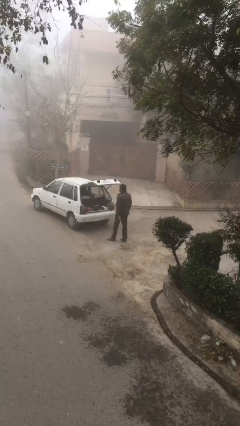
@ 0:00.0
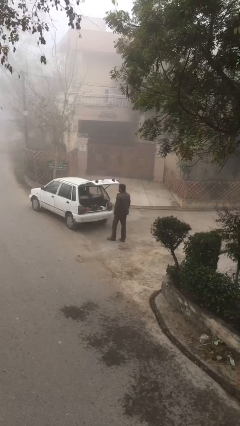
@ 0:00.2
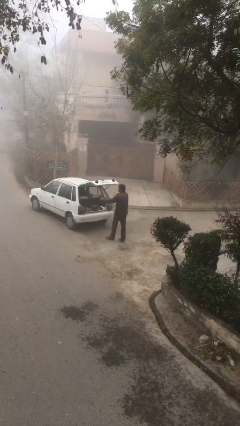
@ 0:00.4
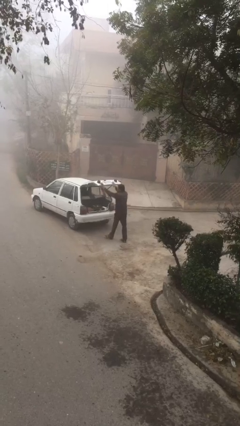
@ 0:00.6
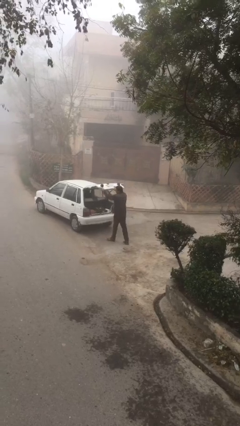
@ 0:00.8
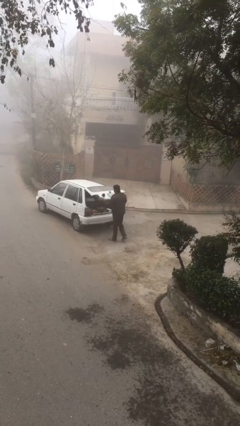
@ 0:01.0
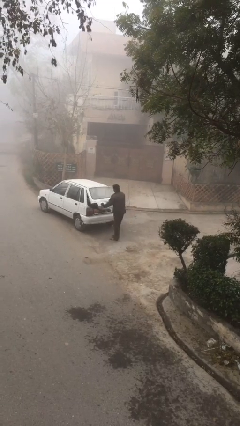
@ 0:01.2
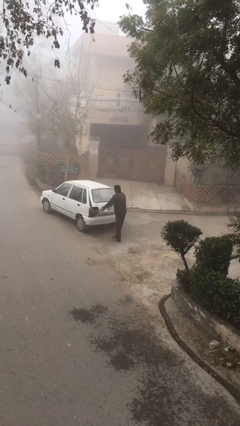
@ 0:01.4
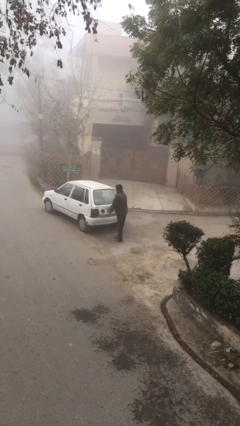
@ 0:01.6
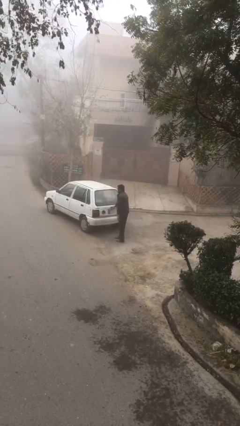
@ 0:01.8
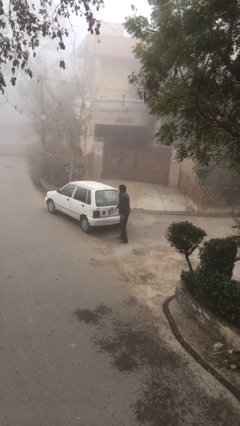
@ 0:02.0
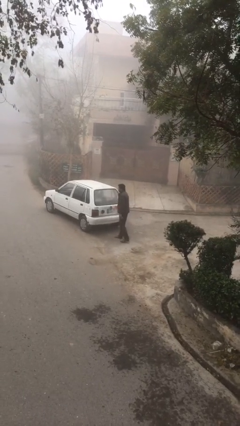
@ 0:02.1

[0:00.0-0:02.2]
person closes car trunk

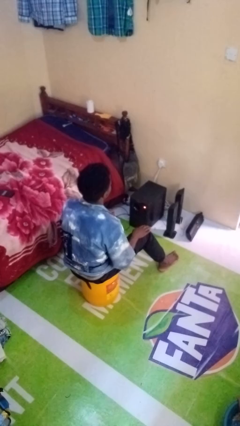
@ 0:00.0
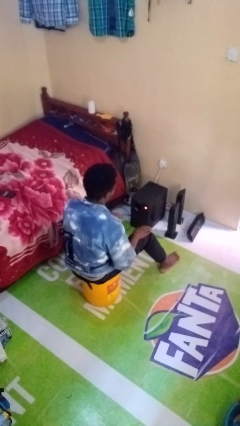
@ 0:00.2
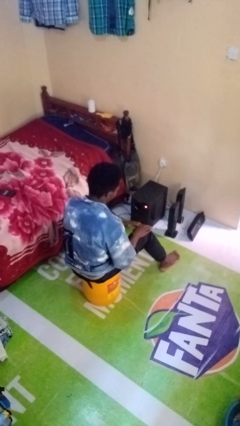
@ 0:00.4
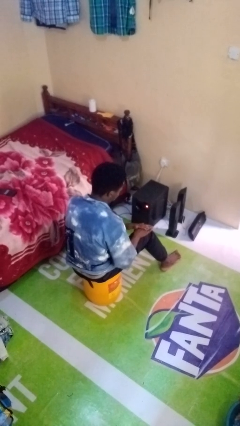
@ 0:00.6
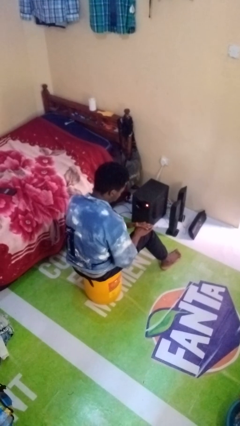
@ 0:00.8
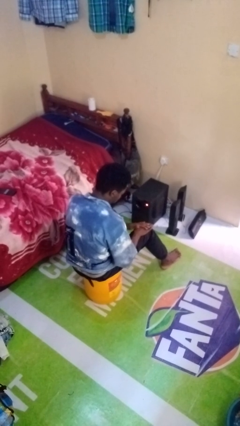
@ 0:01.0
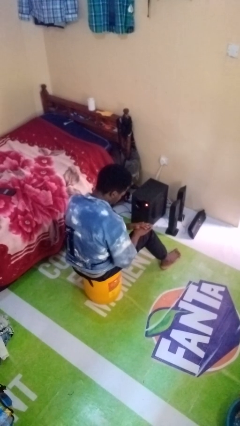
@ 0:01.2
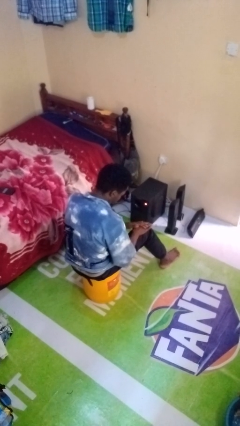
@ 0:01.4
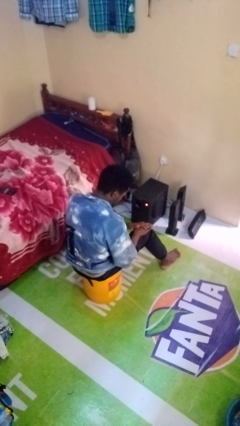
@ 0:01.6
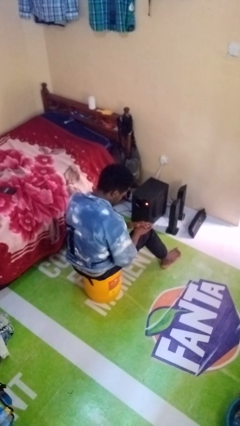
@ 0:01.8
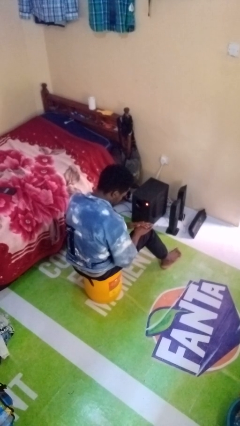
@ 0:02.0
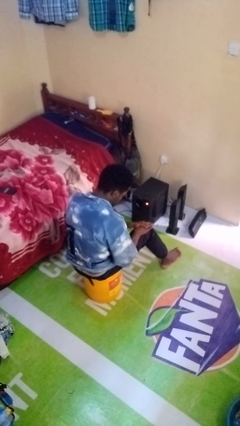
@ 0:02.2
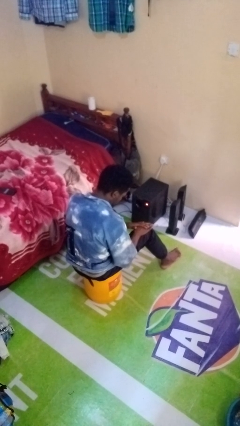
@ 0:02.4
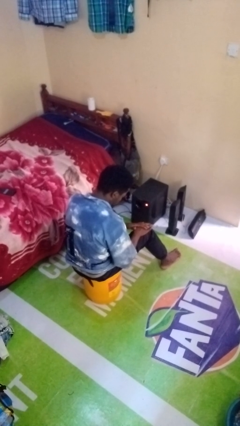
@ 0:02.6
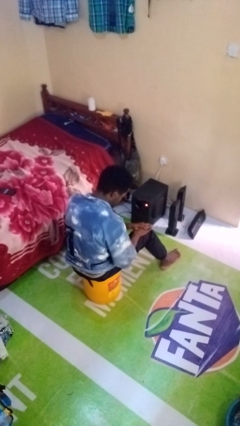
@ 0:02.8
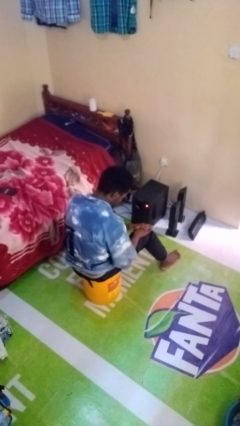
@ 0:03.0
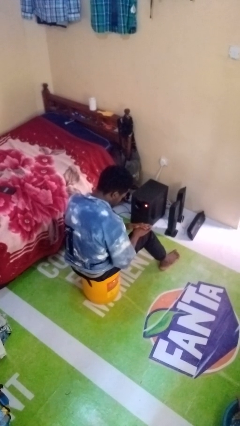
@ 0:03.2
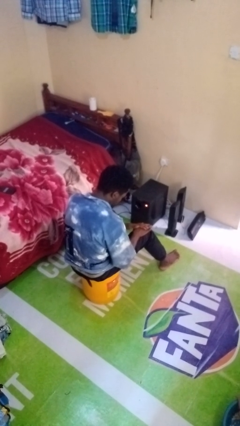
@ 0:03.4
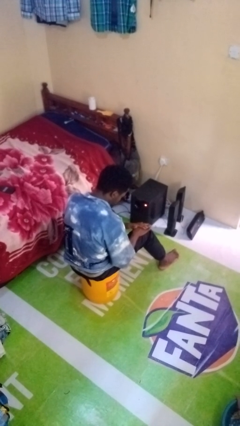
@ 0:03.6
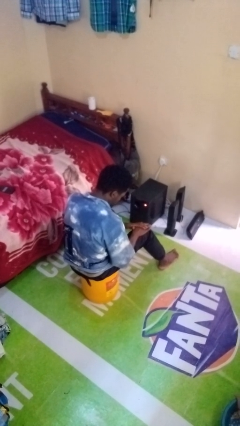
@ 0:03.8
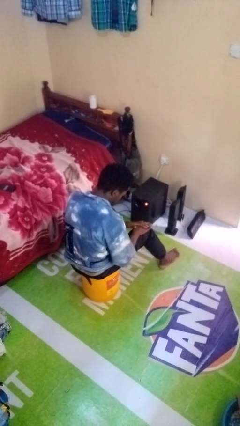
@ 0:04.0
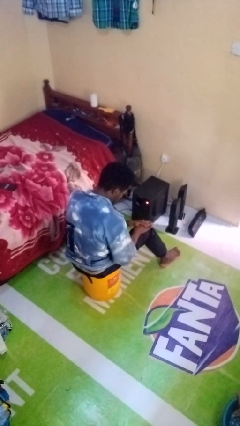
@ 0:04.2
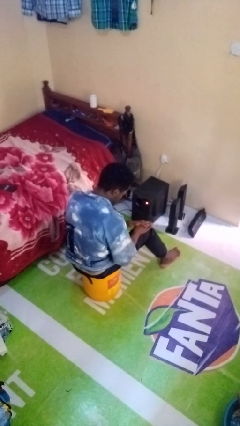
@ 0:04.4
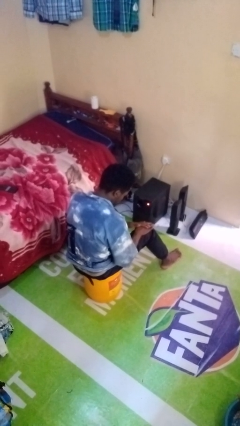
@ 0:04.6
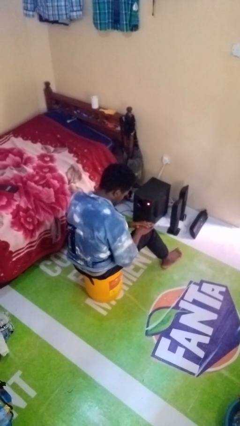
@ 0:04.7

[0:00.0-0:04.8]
person looks at hands in lap

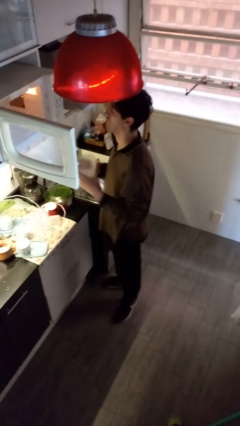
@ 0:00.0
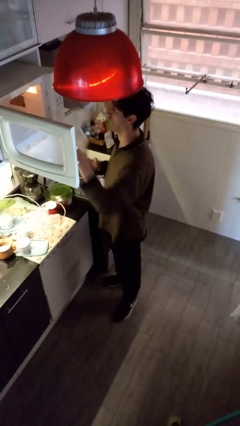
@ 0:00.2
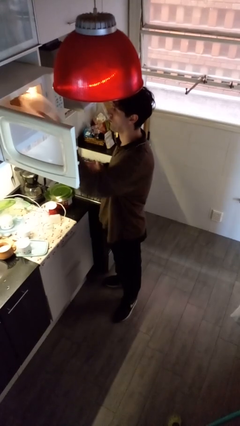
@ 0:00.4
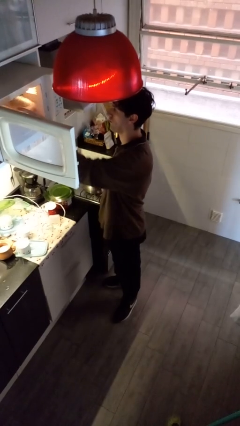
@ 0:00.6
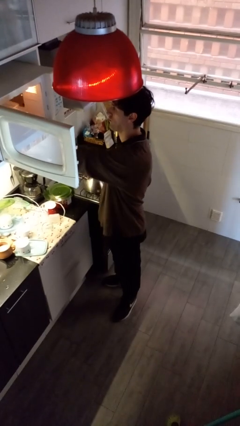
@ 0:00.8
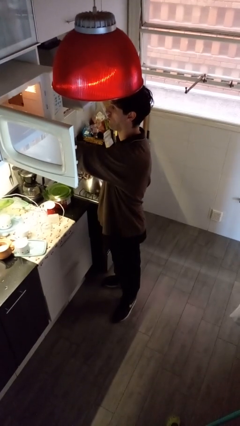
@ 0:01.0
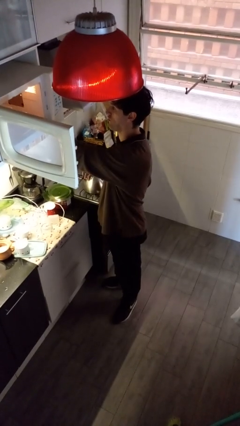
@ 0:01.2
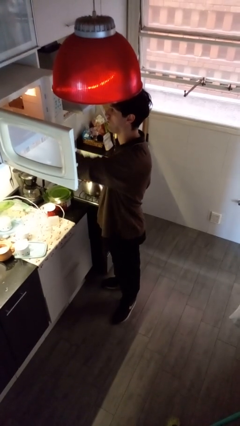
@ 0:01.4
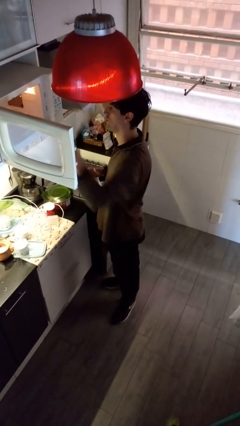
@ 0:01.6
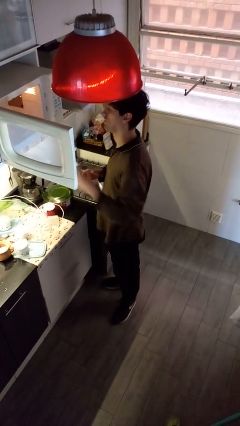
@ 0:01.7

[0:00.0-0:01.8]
person puts object into microwave

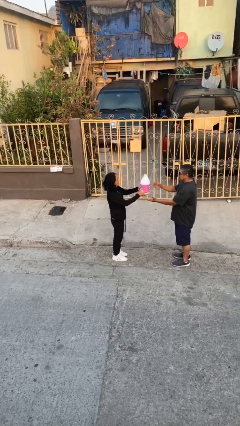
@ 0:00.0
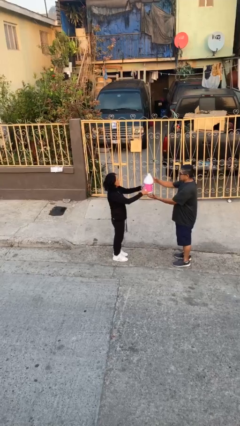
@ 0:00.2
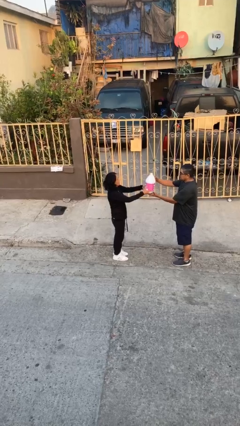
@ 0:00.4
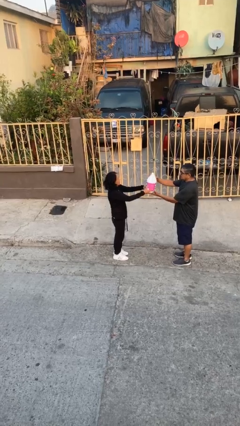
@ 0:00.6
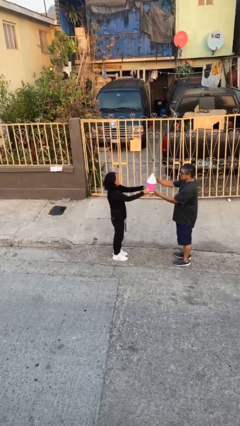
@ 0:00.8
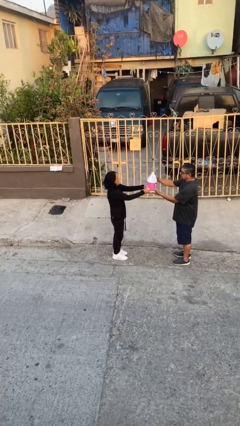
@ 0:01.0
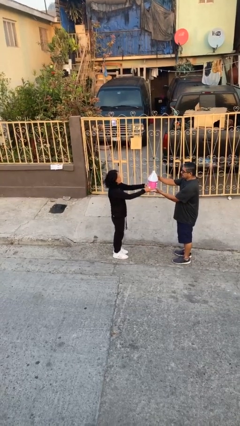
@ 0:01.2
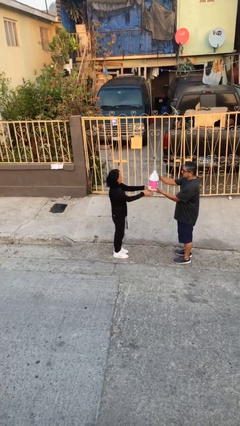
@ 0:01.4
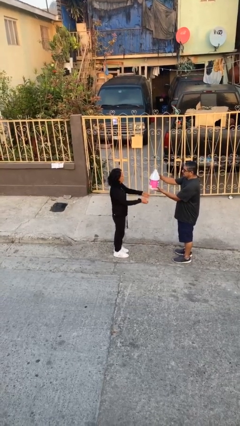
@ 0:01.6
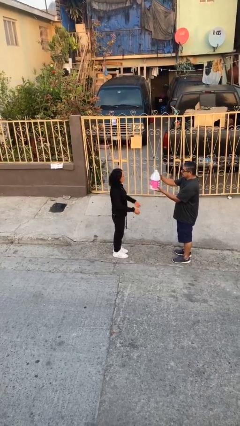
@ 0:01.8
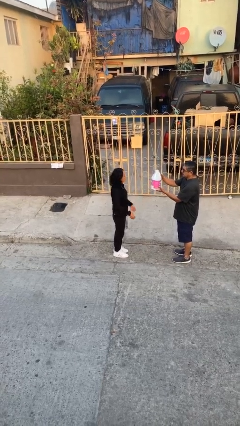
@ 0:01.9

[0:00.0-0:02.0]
person transfers object to person

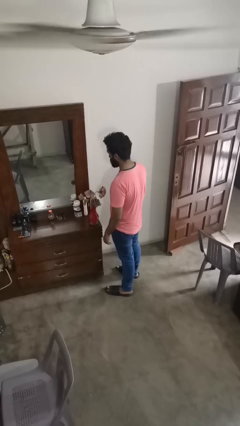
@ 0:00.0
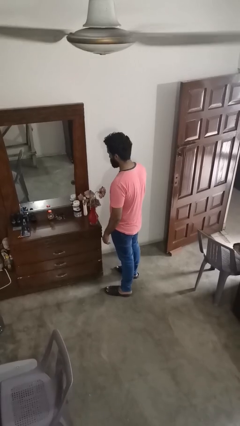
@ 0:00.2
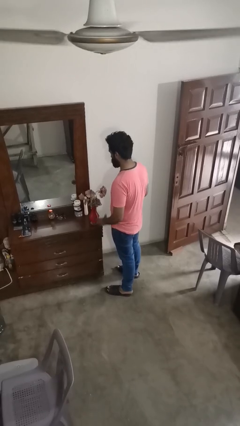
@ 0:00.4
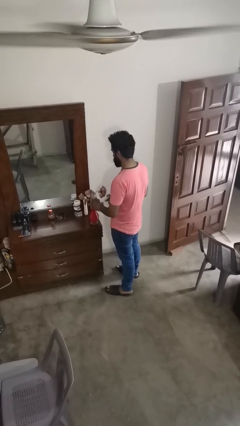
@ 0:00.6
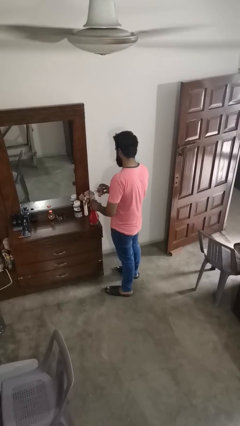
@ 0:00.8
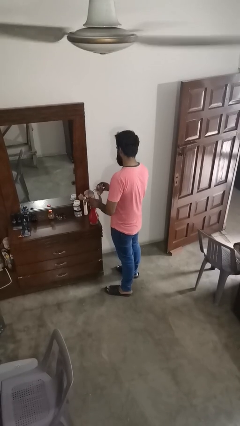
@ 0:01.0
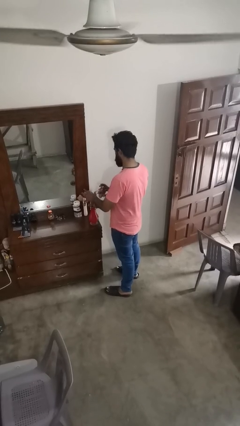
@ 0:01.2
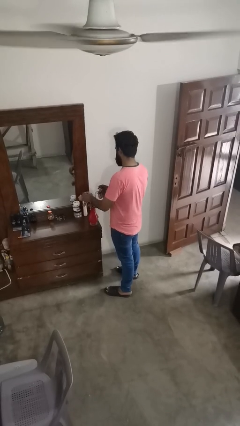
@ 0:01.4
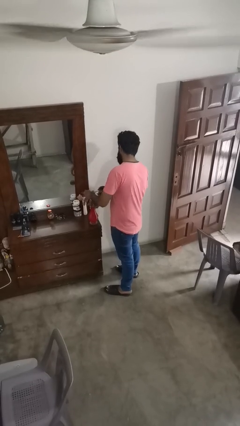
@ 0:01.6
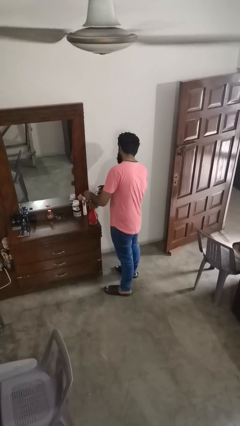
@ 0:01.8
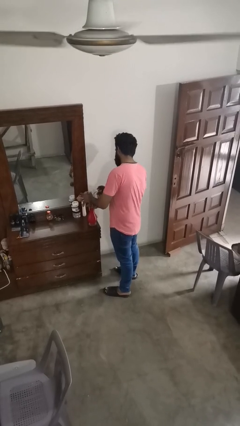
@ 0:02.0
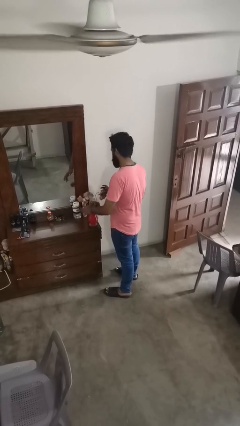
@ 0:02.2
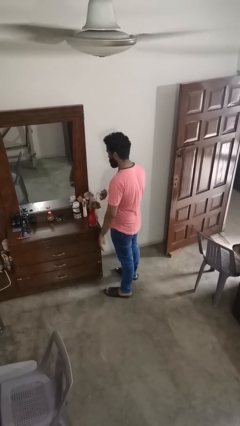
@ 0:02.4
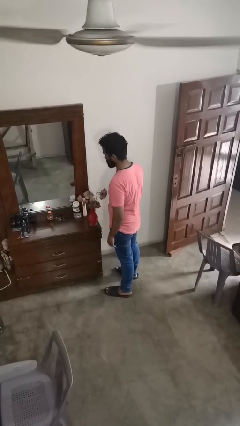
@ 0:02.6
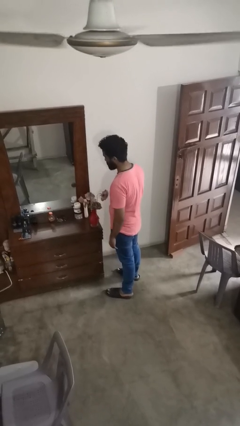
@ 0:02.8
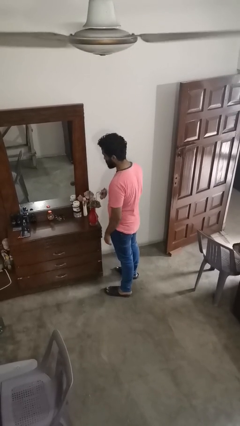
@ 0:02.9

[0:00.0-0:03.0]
person arranges flowers in vase

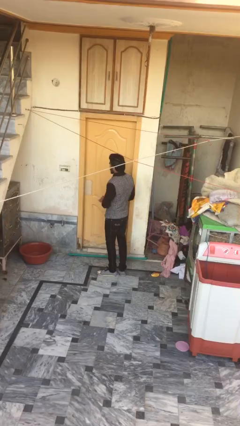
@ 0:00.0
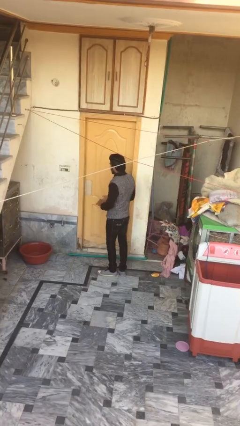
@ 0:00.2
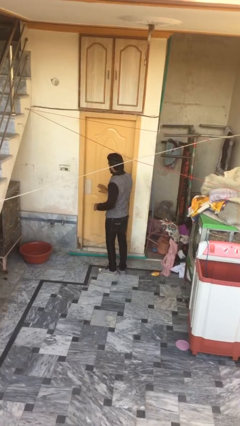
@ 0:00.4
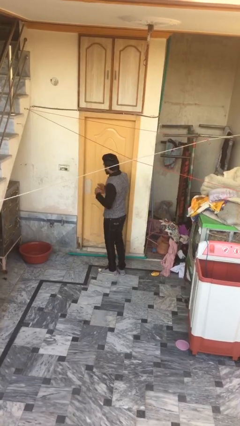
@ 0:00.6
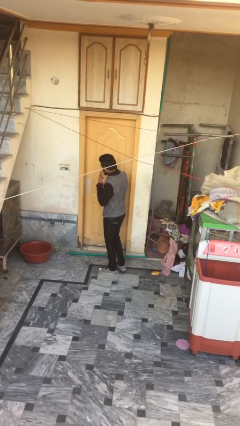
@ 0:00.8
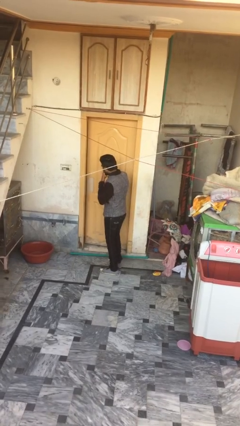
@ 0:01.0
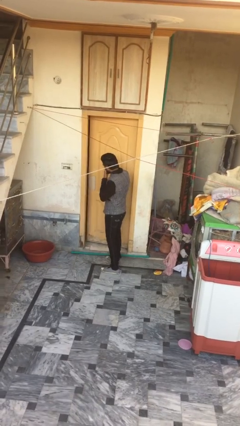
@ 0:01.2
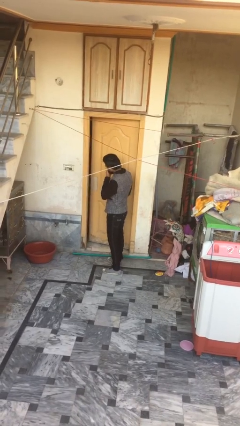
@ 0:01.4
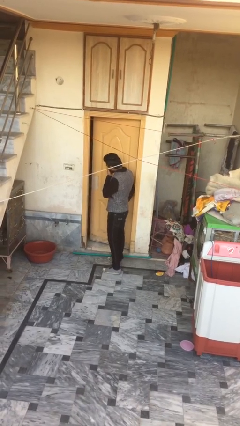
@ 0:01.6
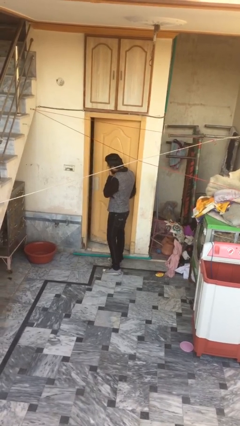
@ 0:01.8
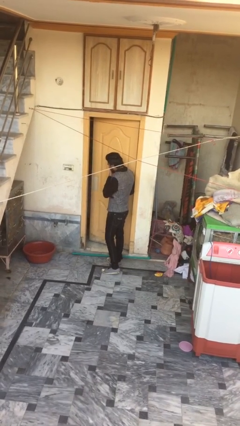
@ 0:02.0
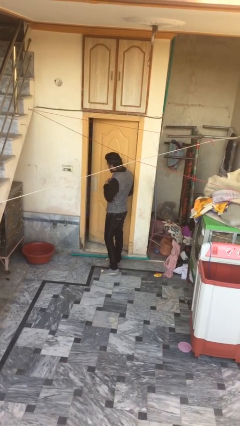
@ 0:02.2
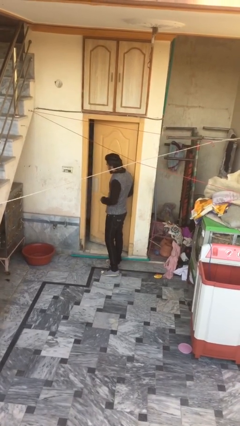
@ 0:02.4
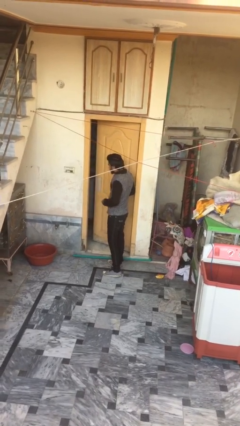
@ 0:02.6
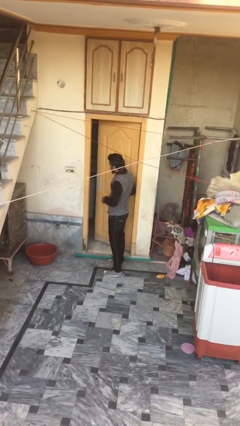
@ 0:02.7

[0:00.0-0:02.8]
person opens facility door

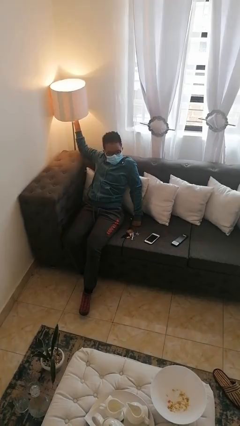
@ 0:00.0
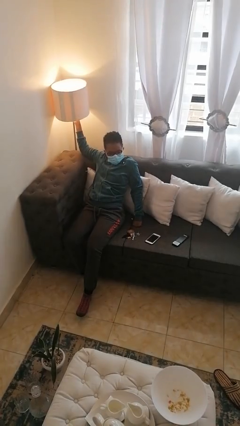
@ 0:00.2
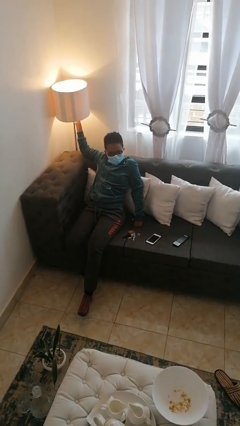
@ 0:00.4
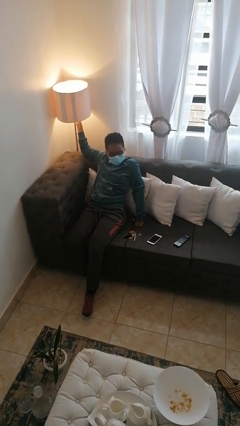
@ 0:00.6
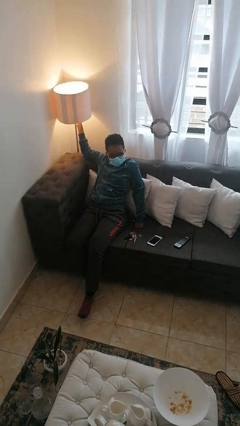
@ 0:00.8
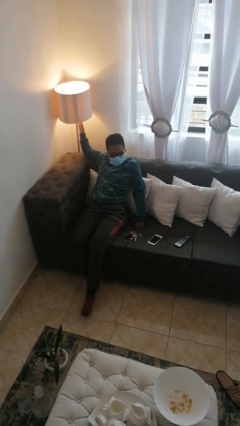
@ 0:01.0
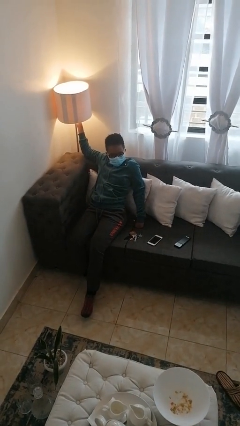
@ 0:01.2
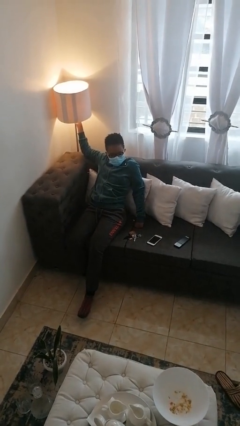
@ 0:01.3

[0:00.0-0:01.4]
person turns on lamp
